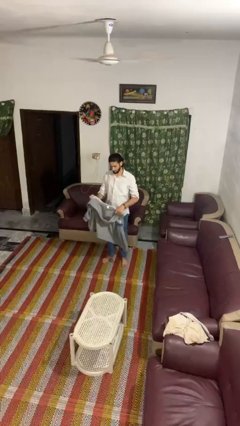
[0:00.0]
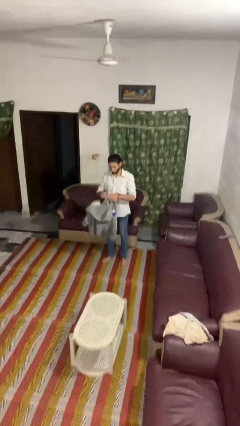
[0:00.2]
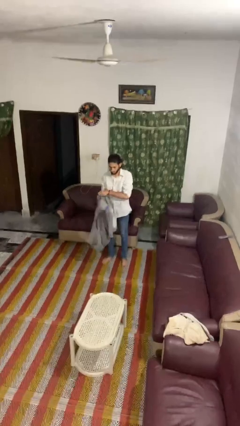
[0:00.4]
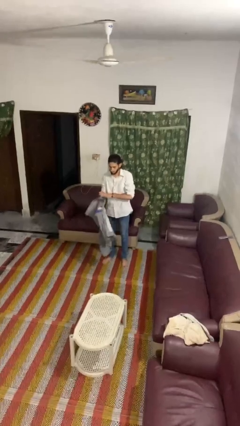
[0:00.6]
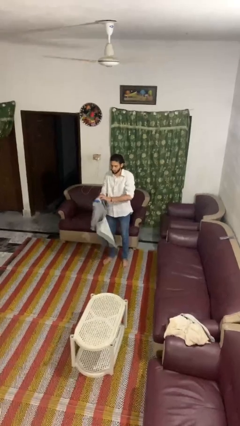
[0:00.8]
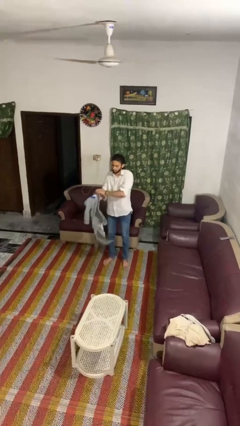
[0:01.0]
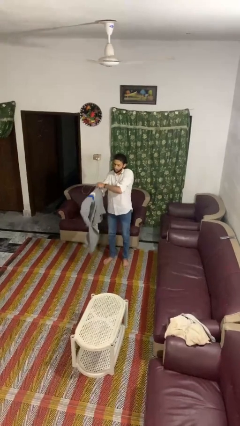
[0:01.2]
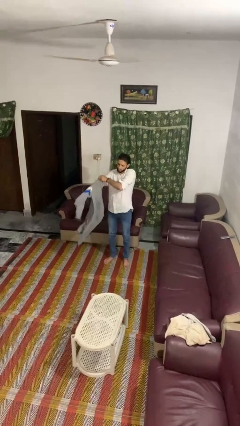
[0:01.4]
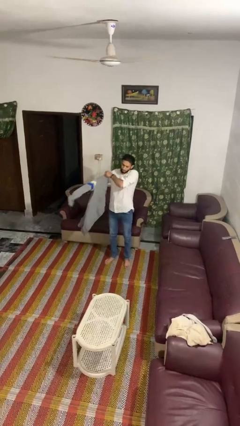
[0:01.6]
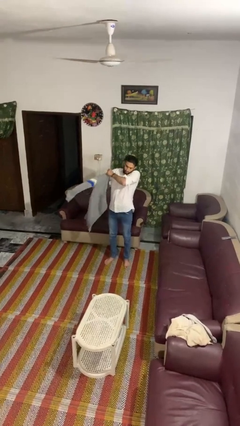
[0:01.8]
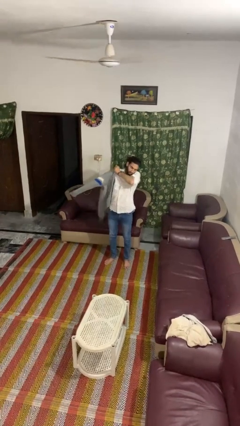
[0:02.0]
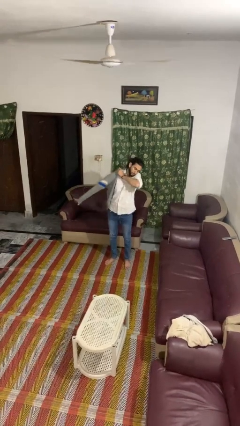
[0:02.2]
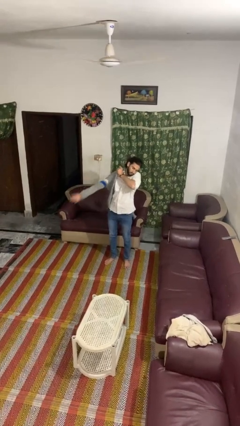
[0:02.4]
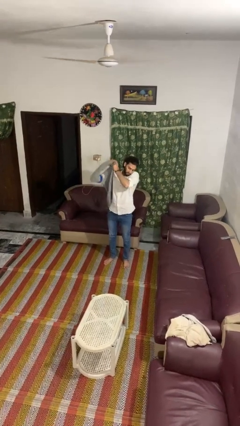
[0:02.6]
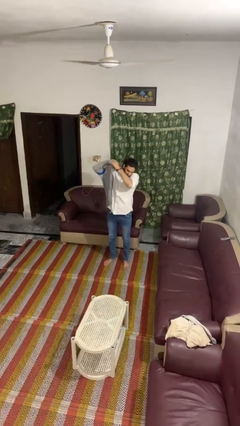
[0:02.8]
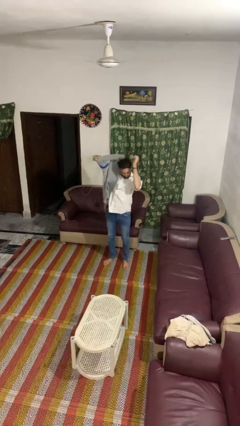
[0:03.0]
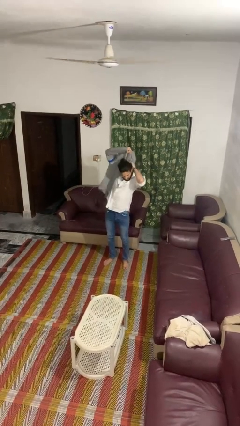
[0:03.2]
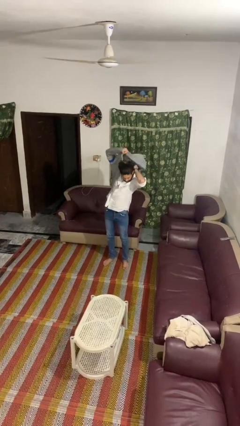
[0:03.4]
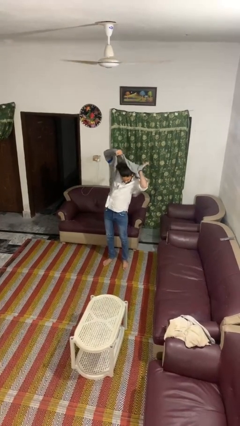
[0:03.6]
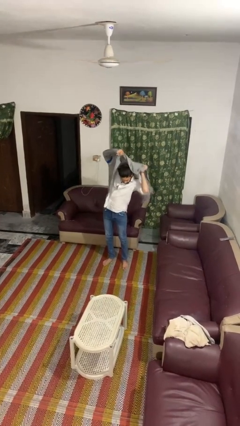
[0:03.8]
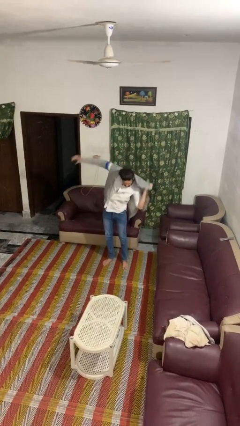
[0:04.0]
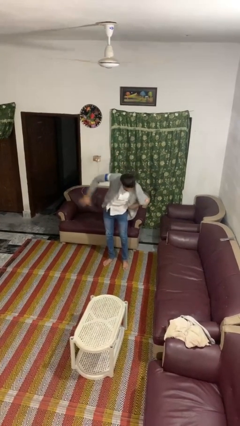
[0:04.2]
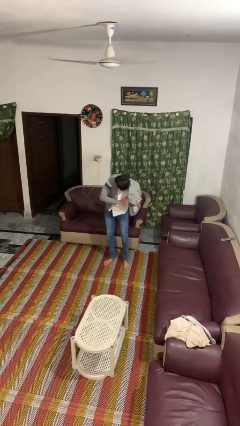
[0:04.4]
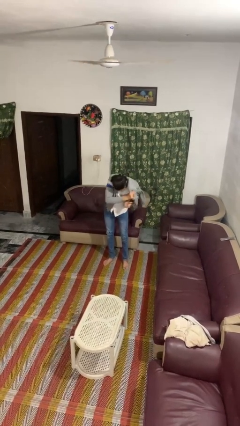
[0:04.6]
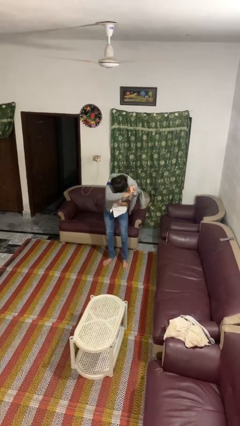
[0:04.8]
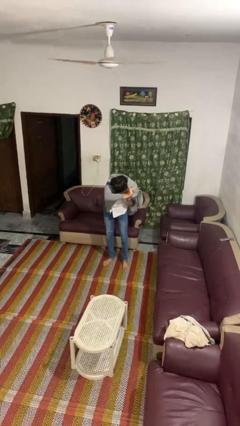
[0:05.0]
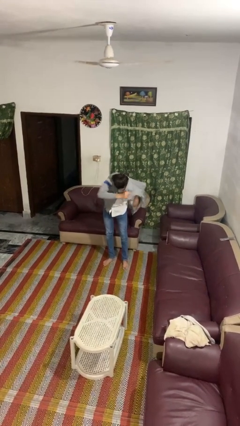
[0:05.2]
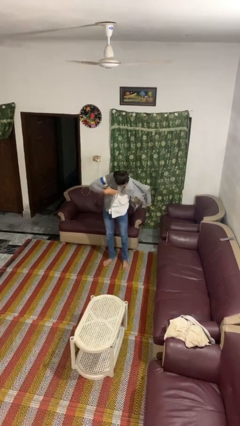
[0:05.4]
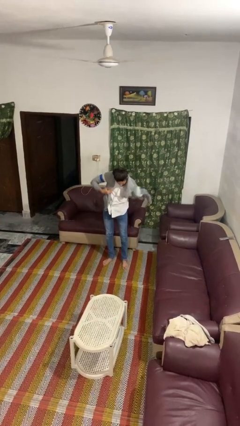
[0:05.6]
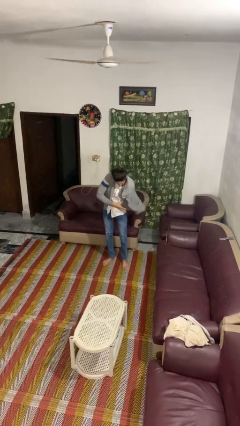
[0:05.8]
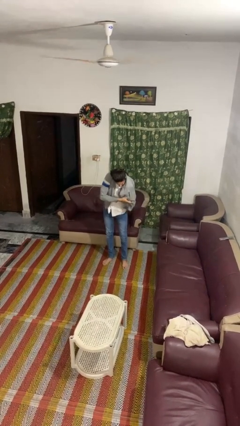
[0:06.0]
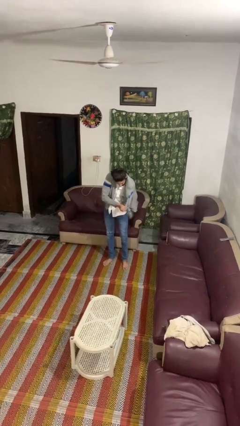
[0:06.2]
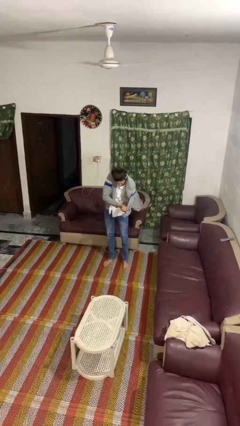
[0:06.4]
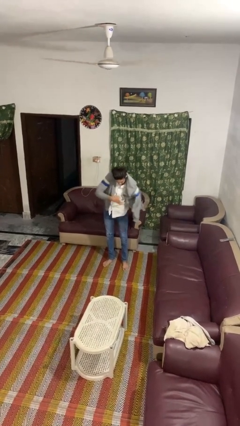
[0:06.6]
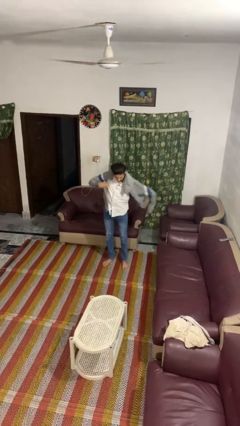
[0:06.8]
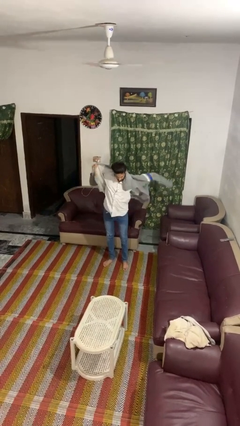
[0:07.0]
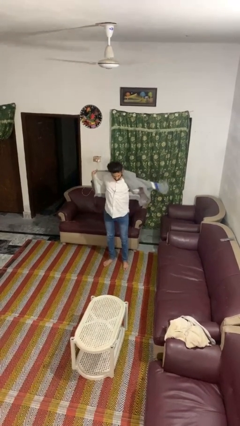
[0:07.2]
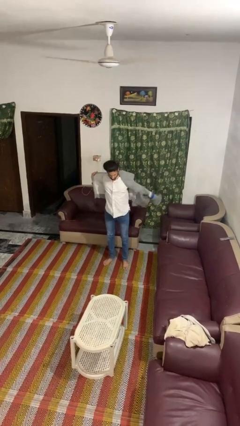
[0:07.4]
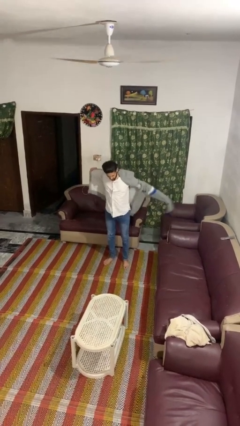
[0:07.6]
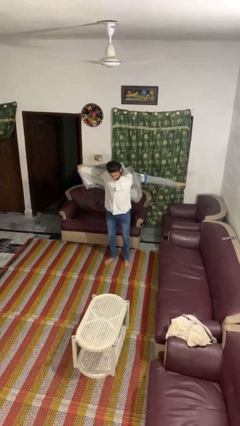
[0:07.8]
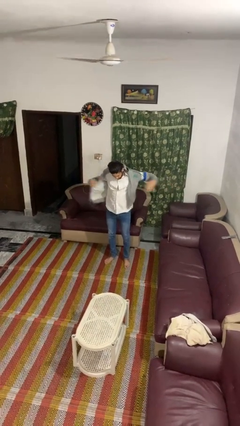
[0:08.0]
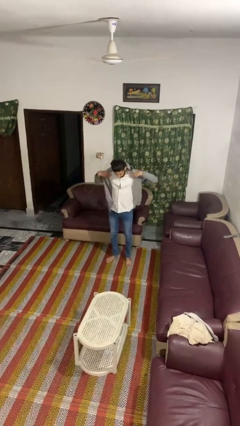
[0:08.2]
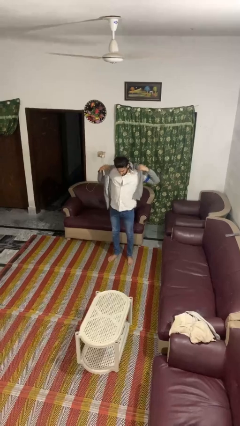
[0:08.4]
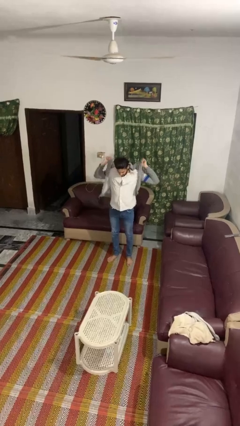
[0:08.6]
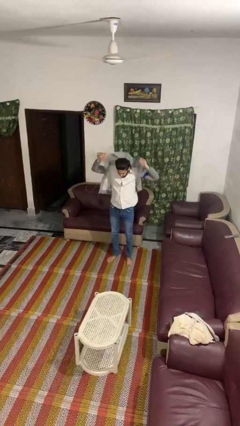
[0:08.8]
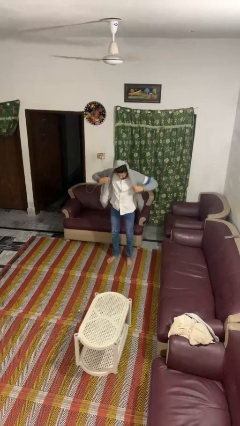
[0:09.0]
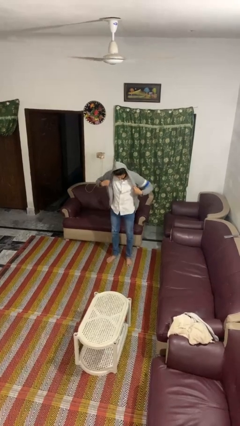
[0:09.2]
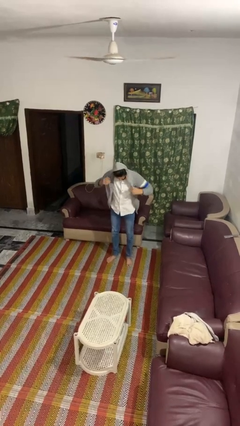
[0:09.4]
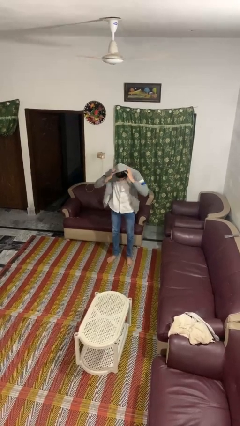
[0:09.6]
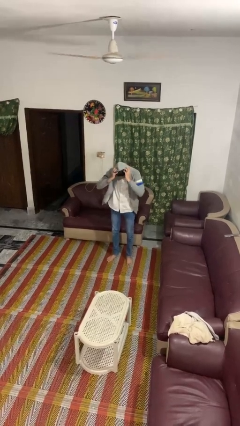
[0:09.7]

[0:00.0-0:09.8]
person puts on hoodie

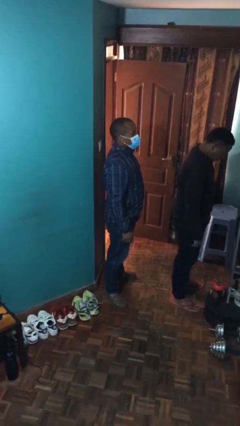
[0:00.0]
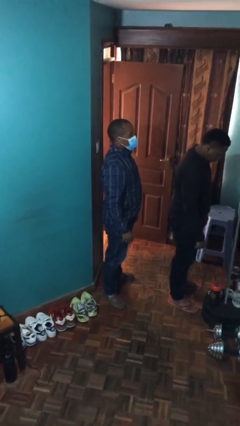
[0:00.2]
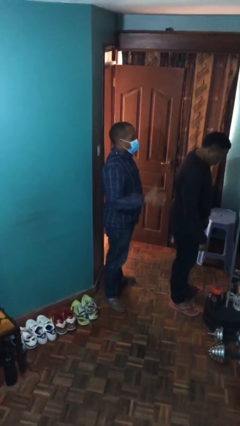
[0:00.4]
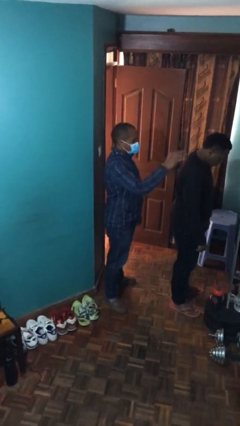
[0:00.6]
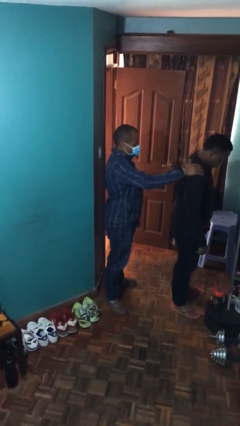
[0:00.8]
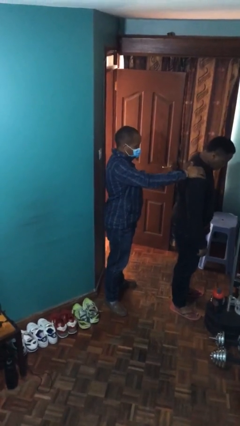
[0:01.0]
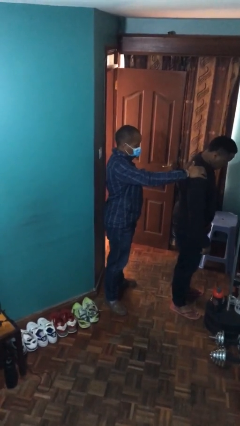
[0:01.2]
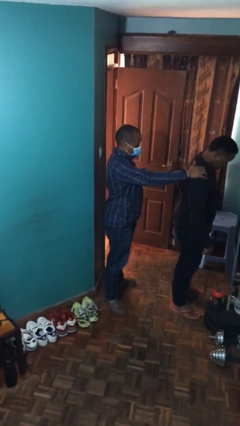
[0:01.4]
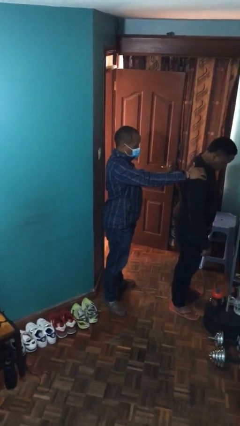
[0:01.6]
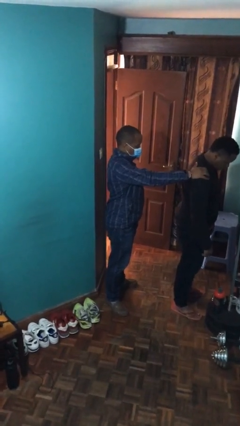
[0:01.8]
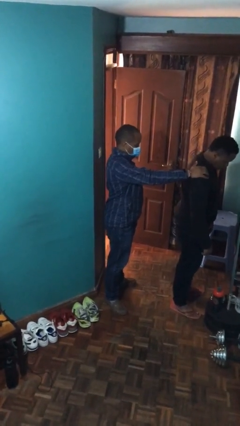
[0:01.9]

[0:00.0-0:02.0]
person grabs person by shoulder

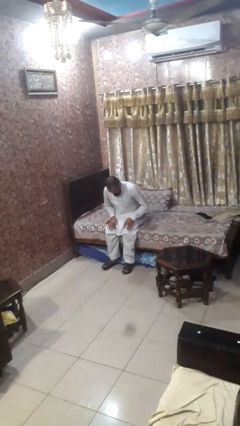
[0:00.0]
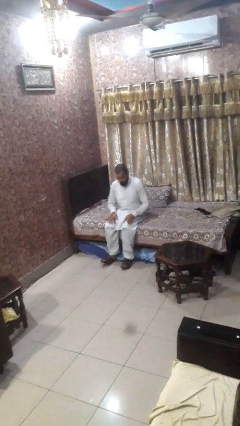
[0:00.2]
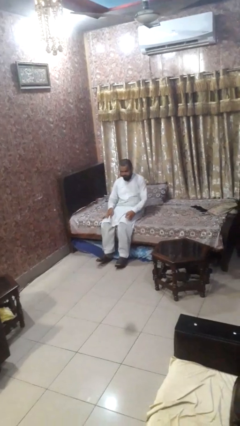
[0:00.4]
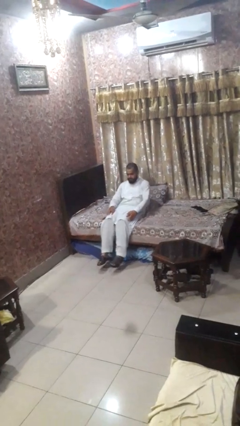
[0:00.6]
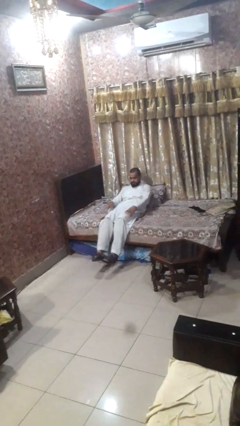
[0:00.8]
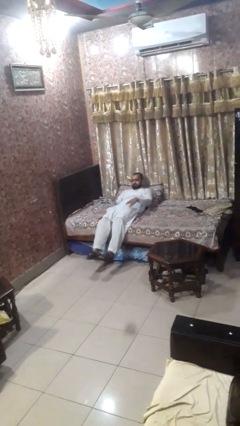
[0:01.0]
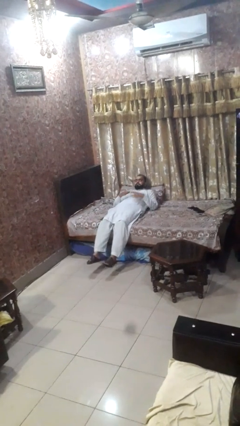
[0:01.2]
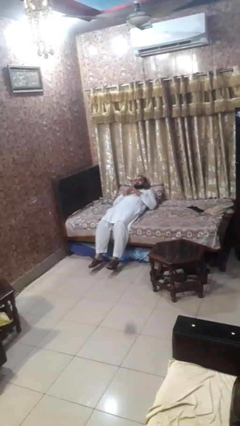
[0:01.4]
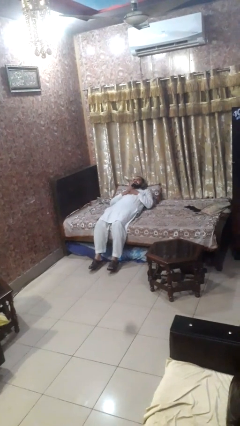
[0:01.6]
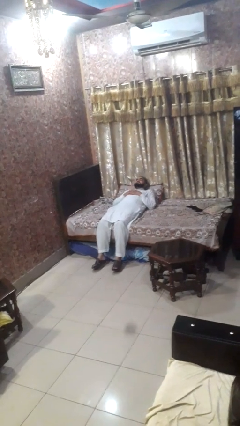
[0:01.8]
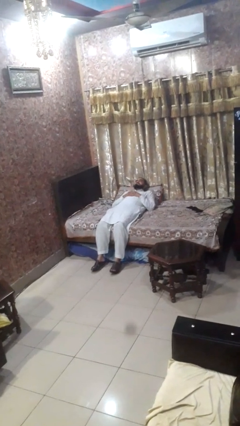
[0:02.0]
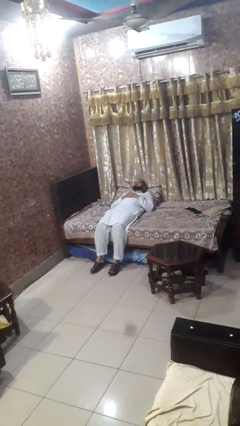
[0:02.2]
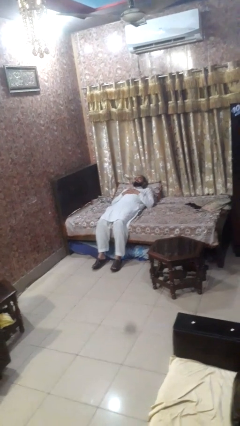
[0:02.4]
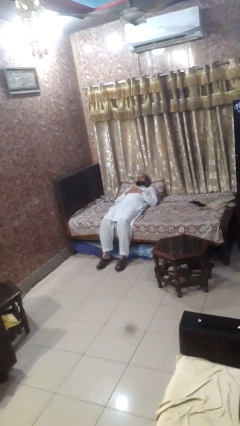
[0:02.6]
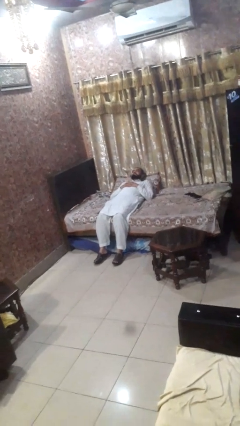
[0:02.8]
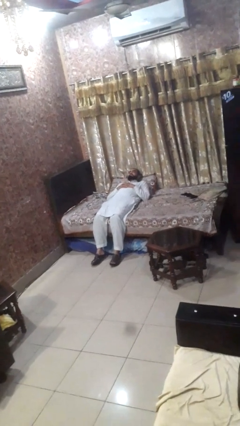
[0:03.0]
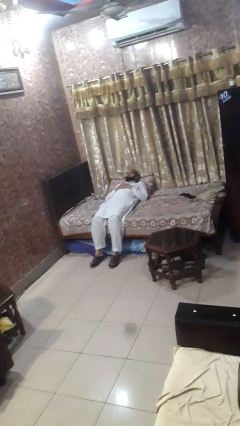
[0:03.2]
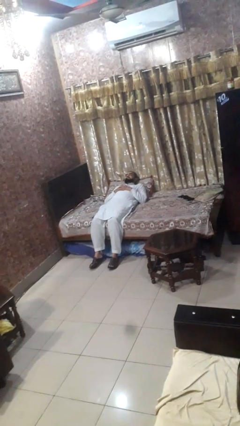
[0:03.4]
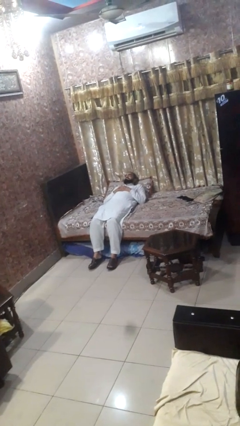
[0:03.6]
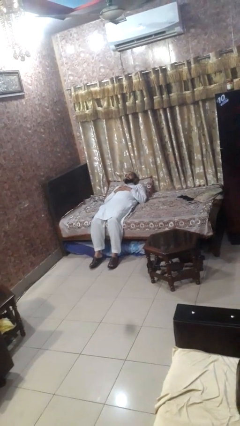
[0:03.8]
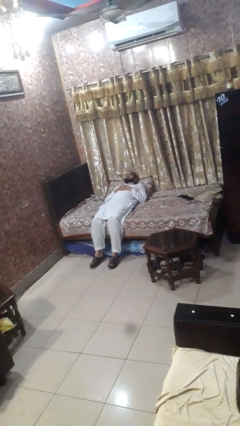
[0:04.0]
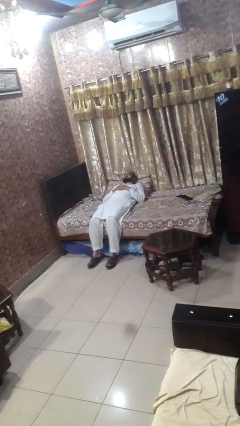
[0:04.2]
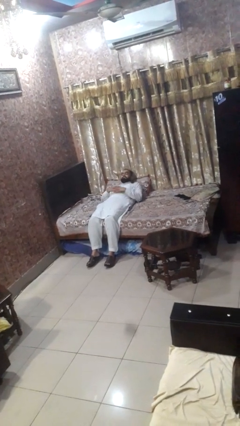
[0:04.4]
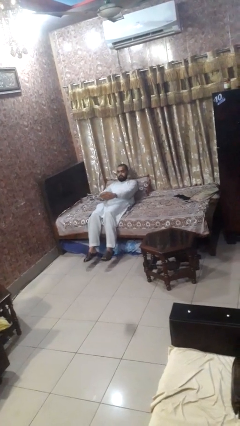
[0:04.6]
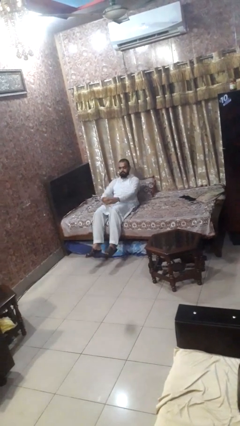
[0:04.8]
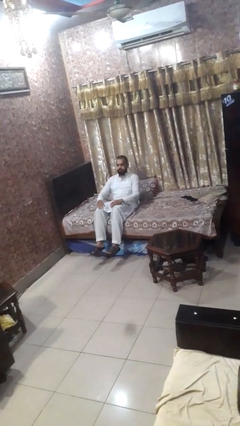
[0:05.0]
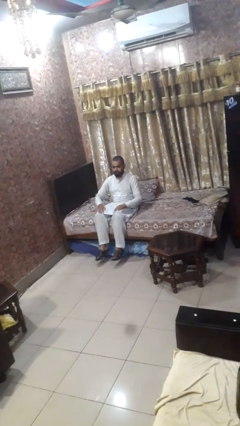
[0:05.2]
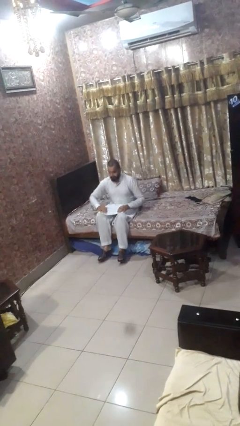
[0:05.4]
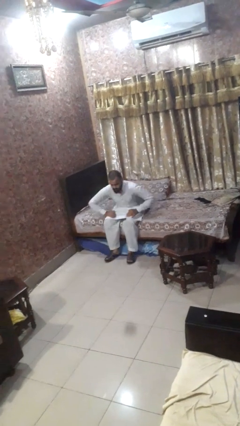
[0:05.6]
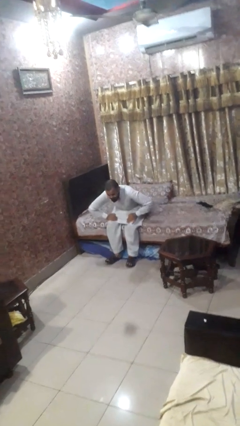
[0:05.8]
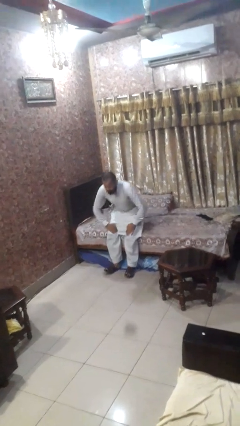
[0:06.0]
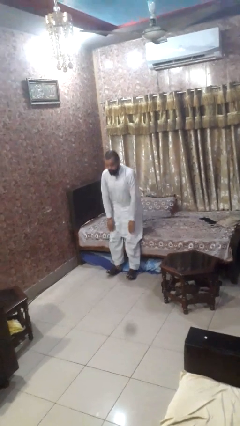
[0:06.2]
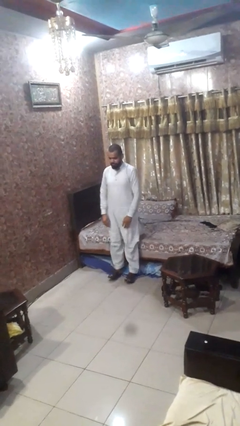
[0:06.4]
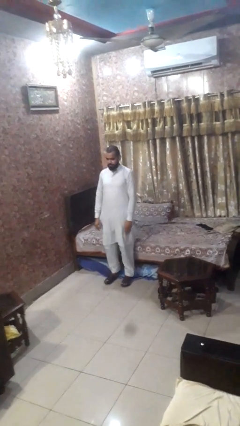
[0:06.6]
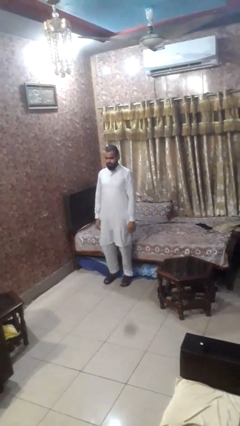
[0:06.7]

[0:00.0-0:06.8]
person lies down on bed
